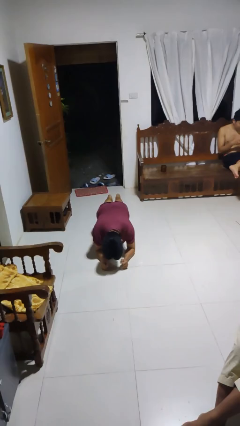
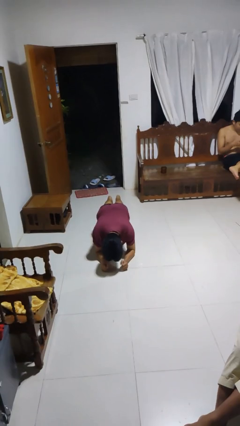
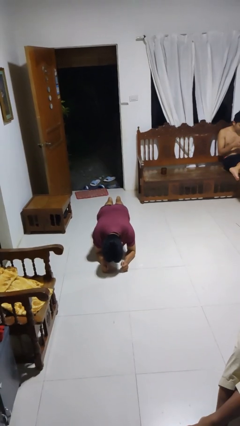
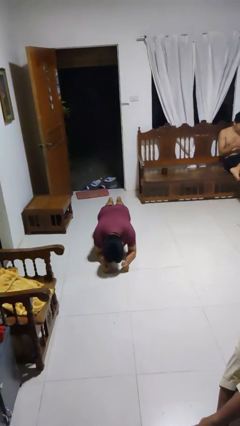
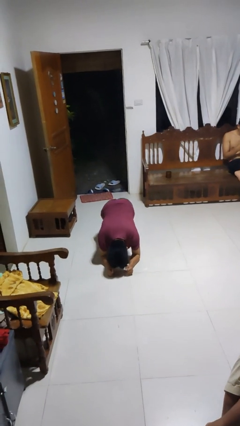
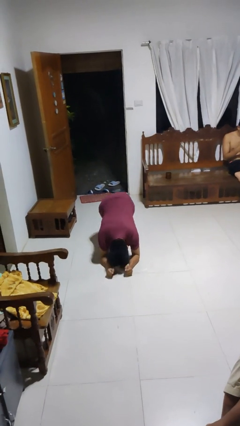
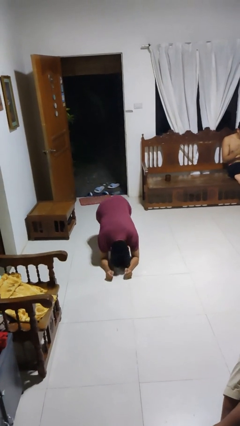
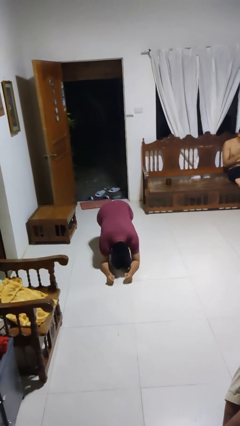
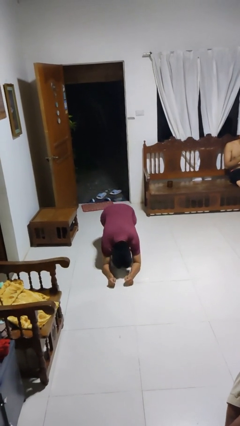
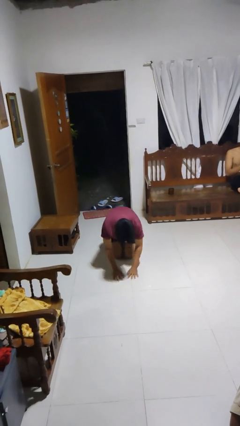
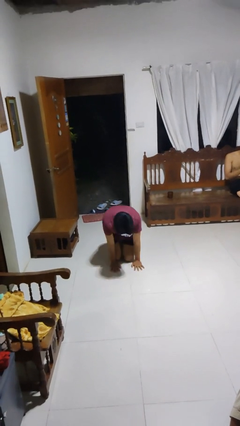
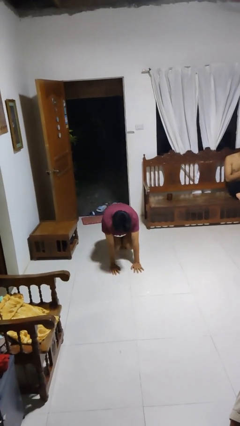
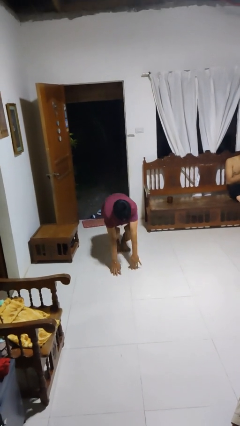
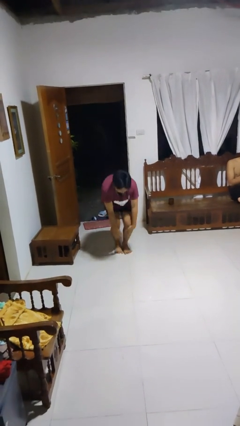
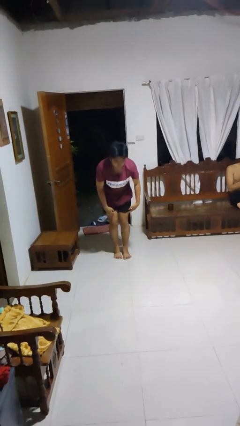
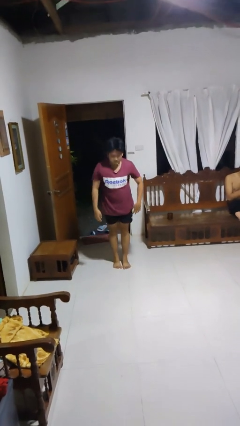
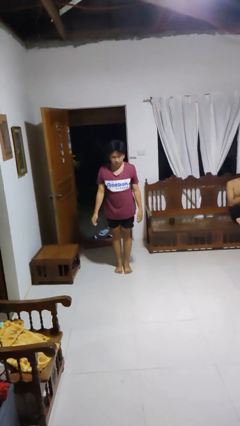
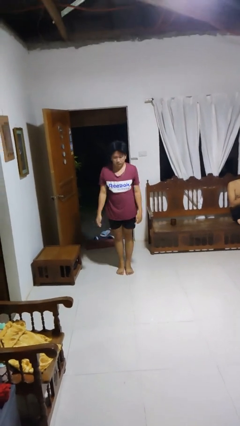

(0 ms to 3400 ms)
person stands up from floor

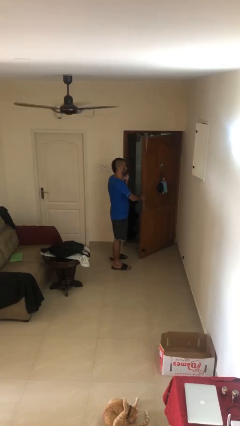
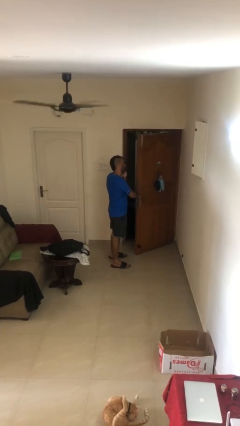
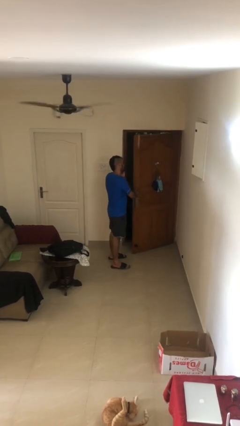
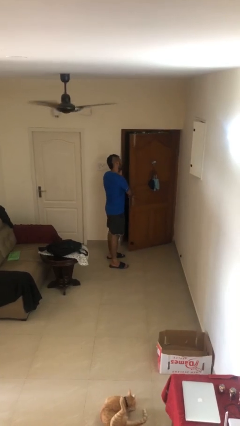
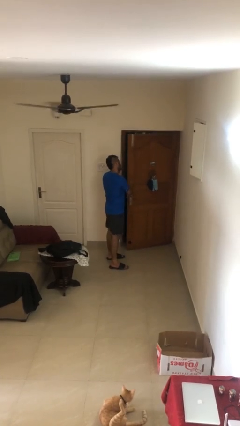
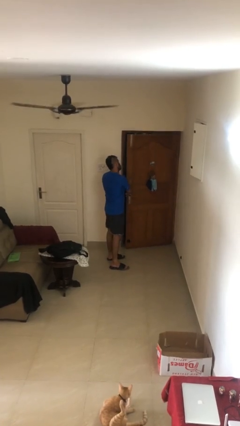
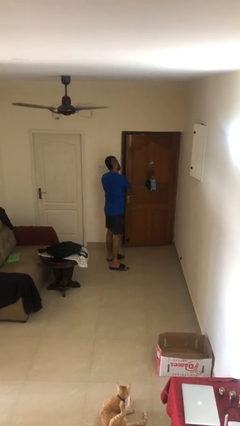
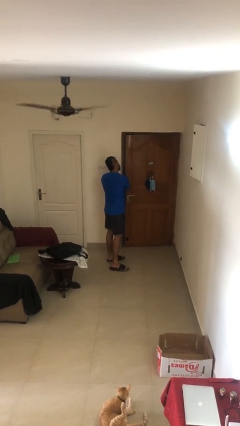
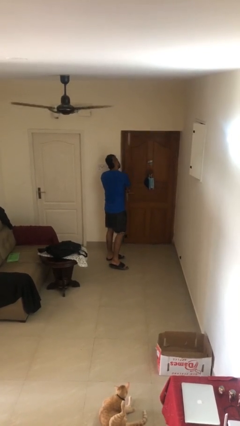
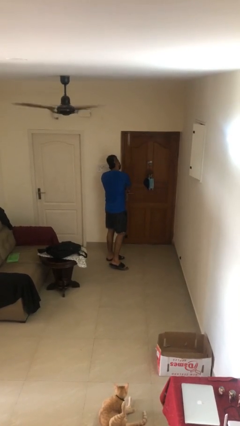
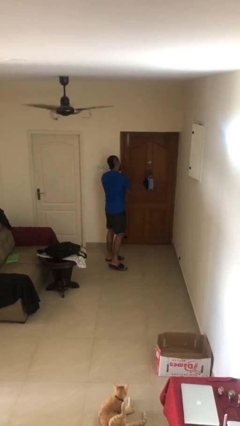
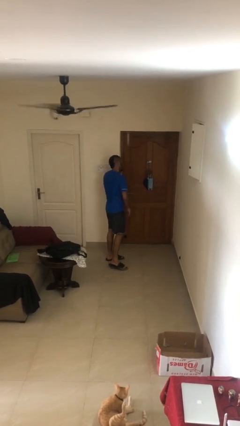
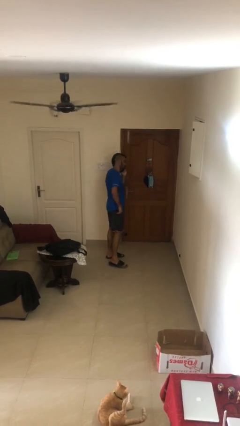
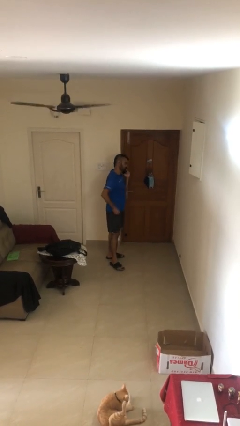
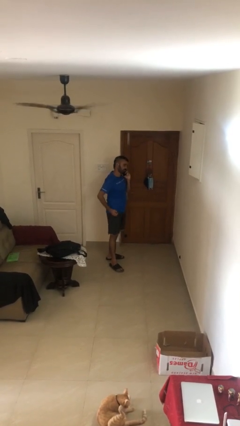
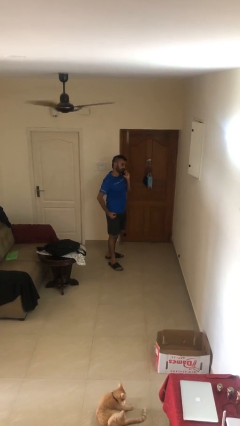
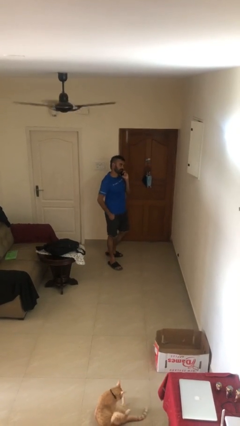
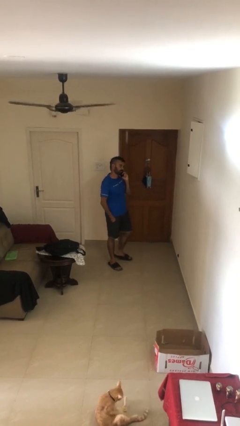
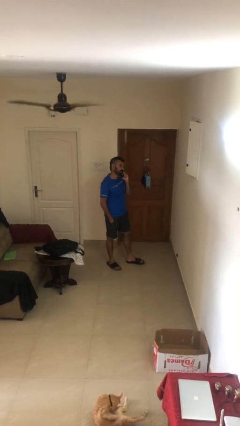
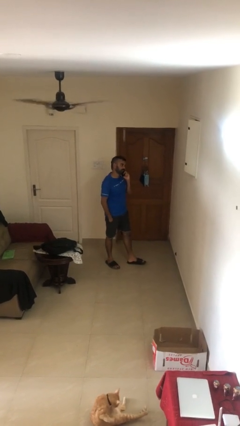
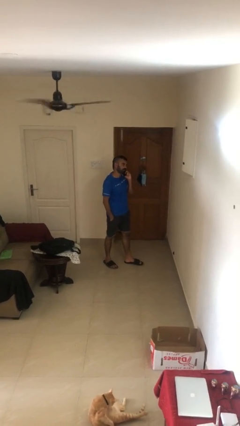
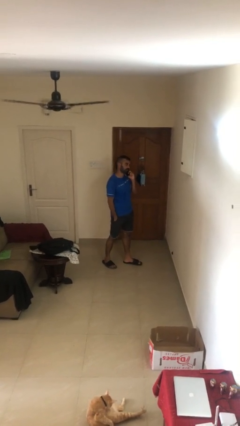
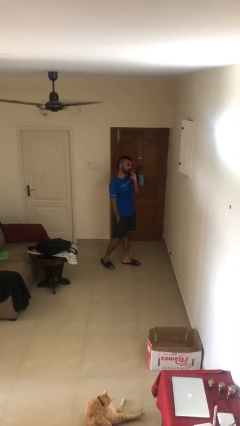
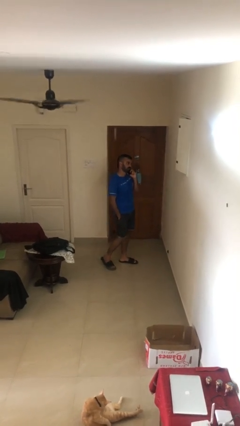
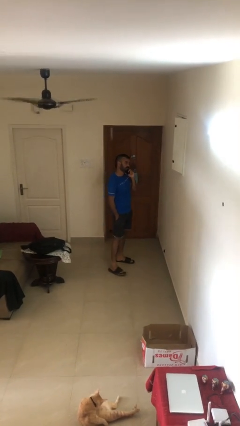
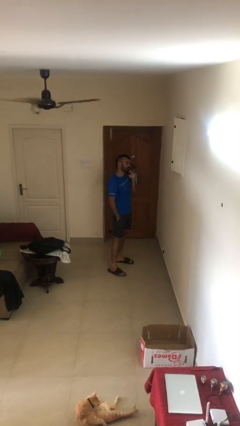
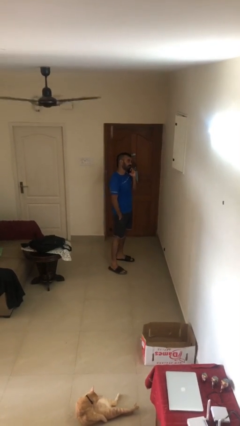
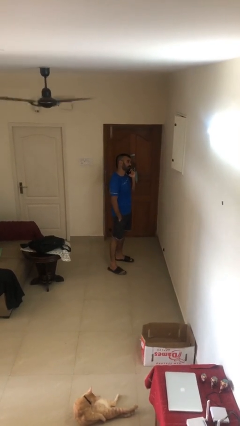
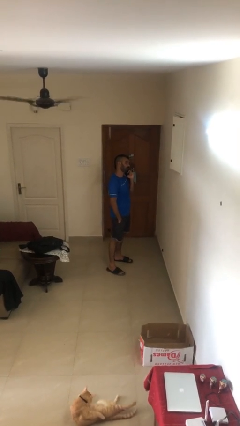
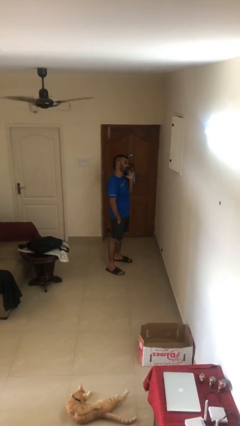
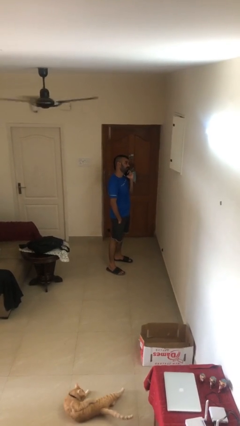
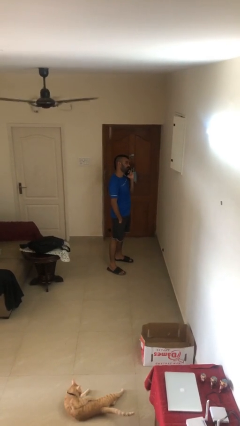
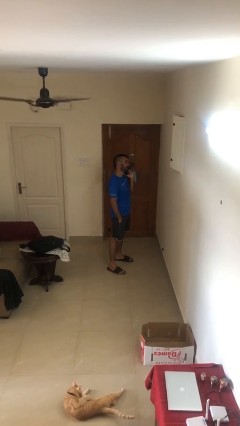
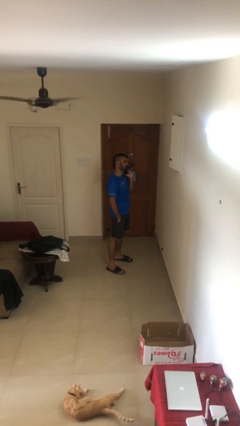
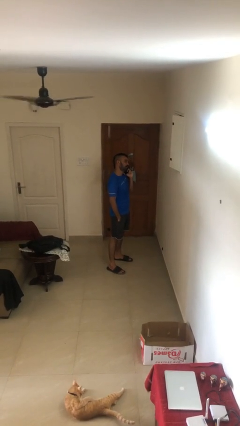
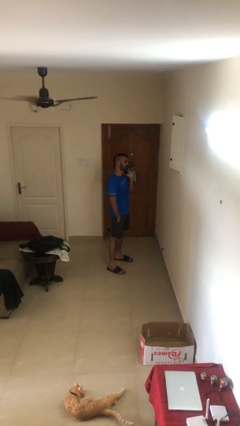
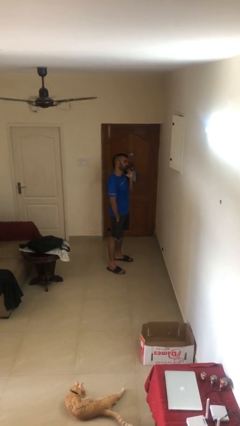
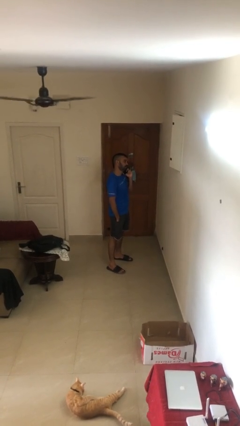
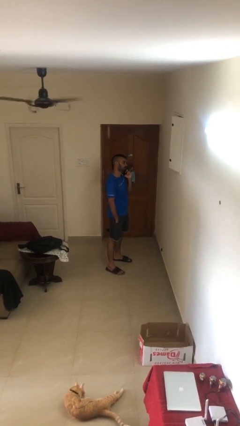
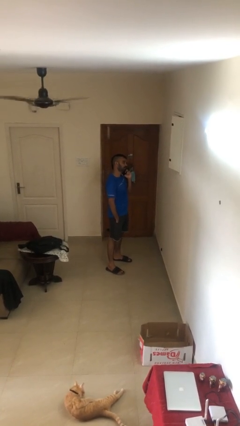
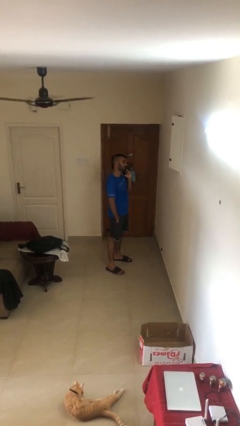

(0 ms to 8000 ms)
person closes facility door

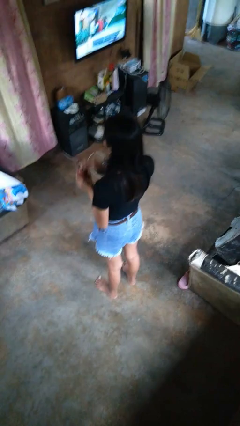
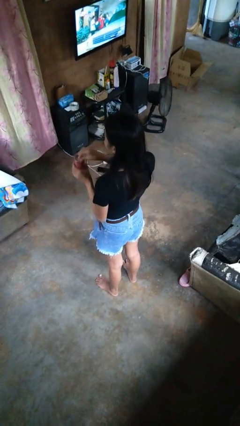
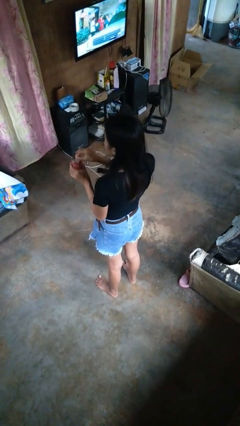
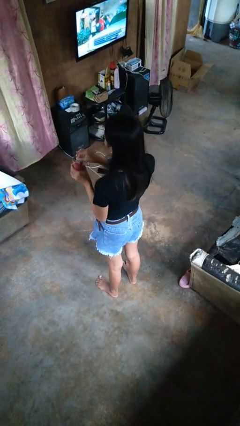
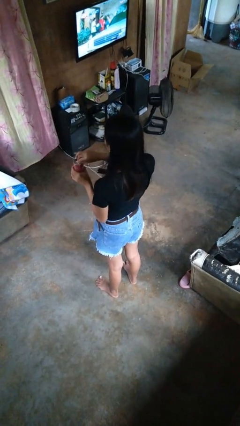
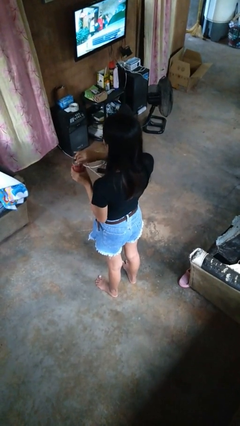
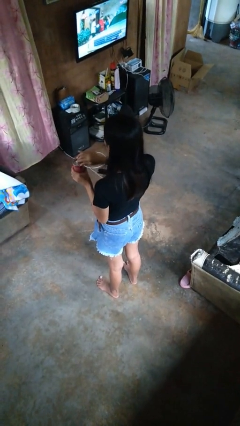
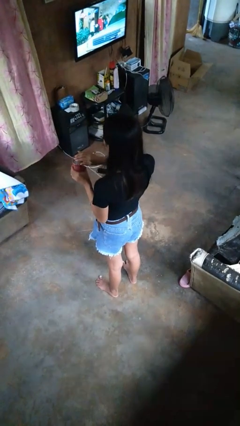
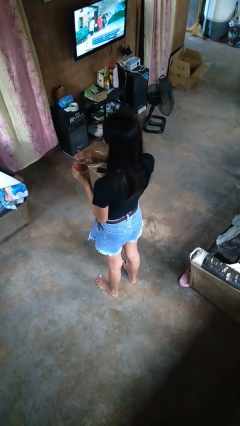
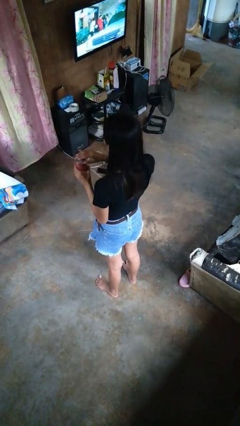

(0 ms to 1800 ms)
person opens beverage can

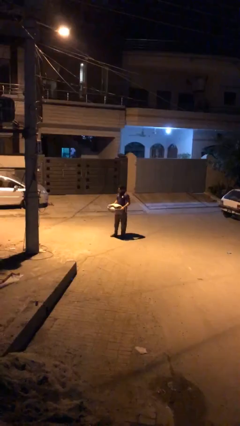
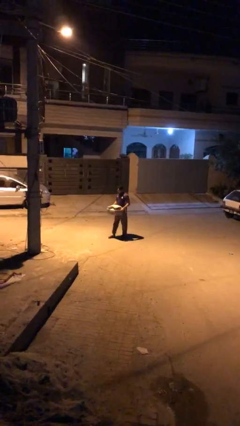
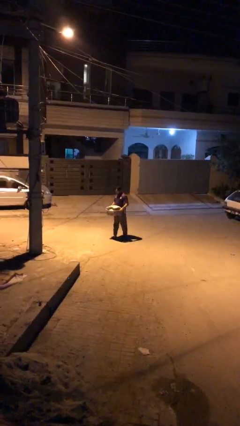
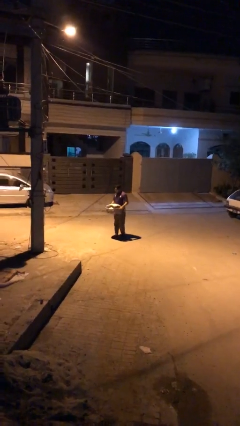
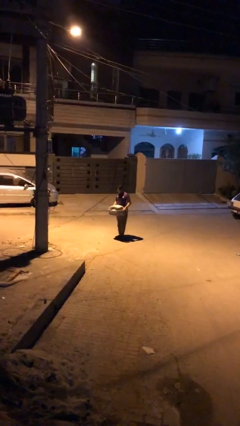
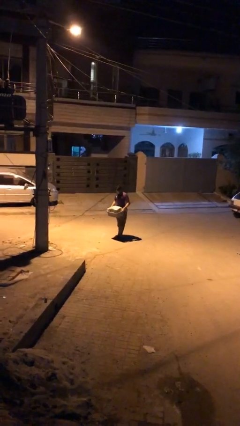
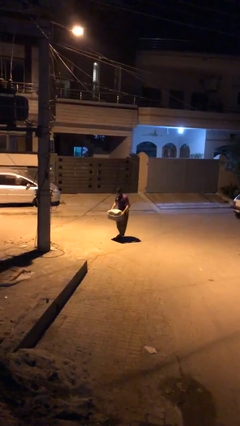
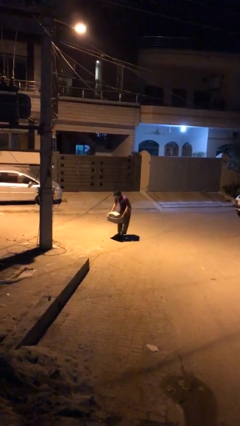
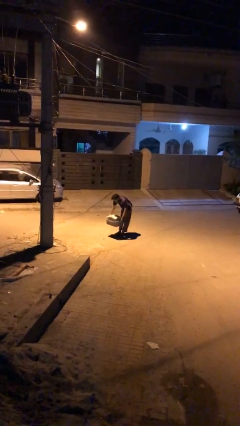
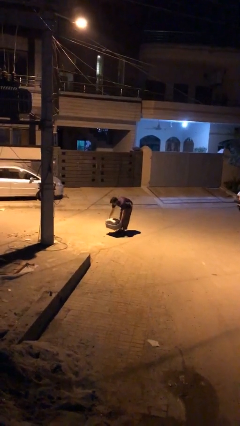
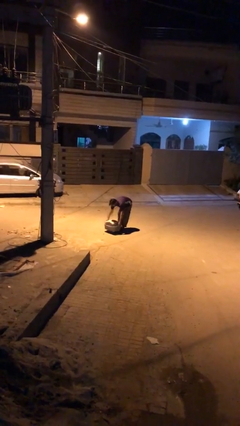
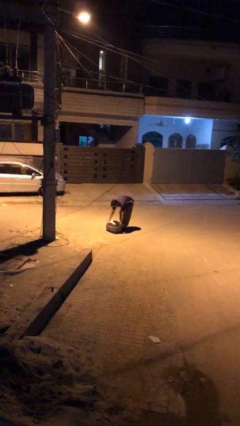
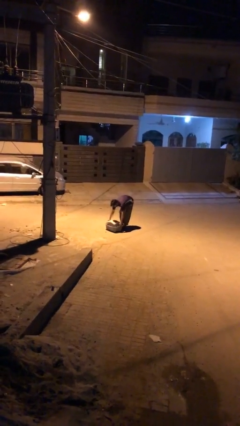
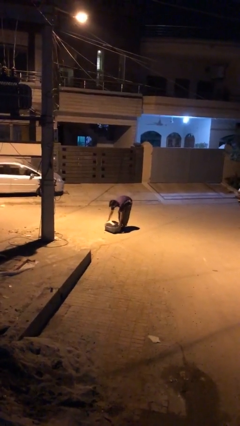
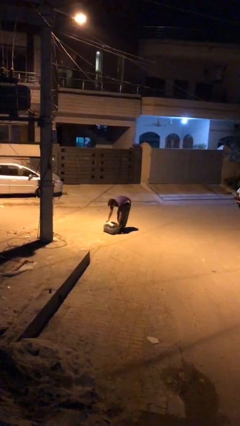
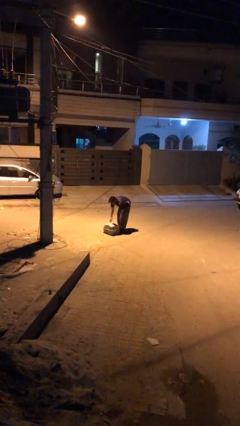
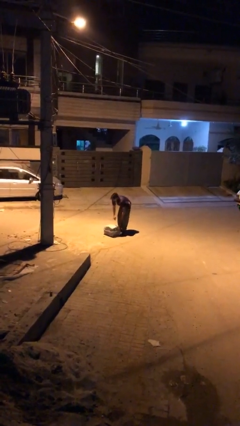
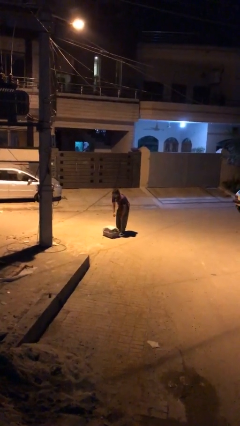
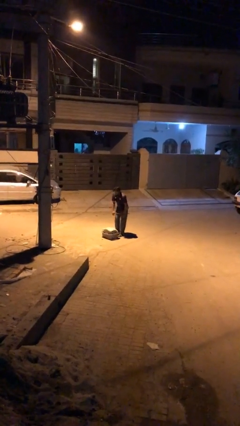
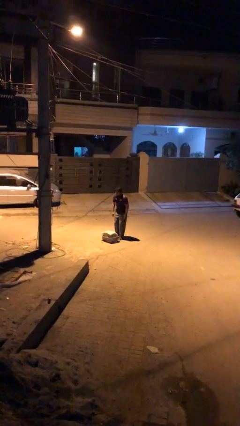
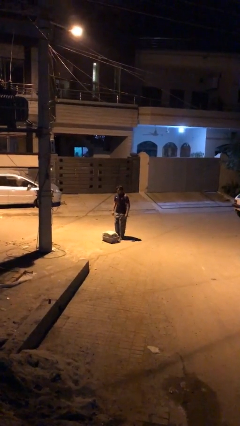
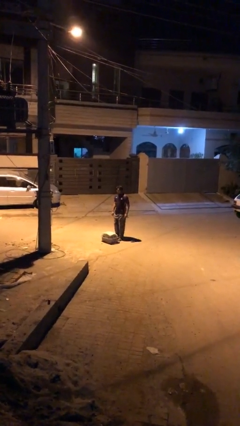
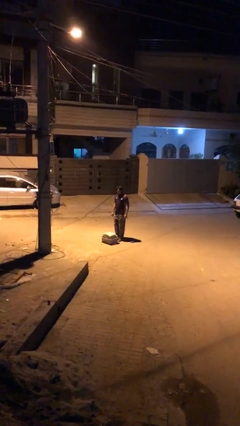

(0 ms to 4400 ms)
person puts down object on floor
